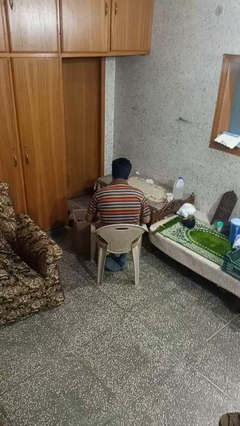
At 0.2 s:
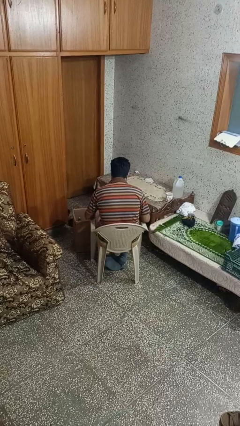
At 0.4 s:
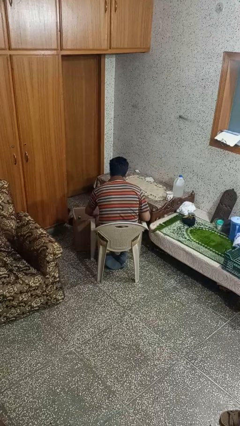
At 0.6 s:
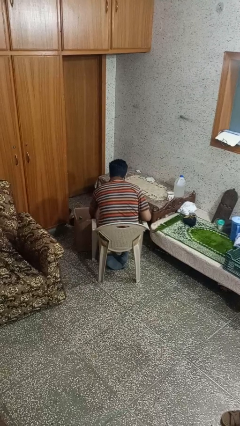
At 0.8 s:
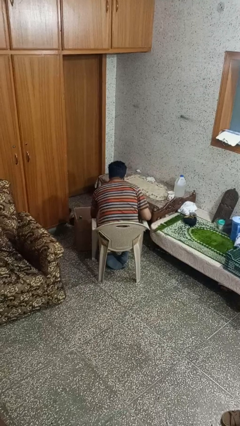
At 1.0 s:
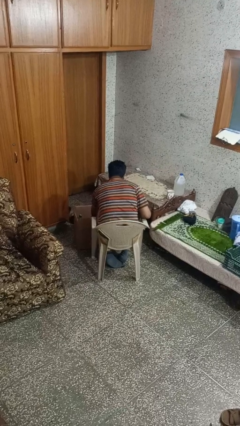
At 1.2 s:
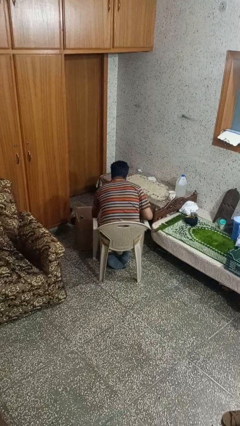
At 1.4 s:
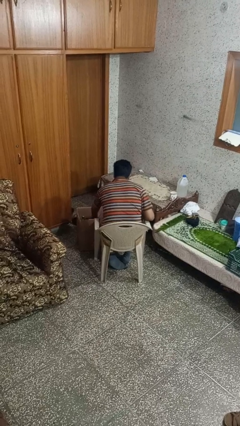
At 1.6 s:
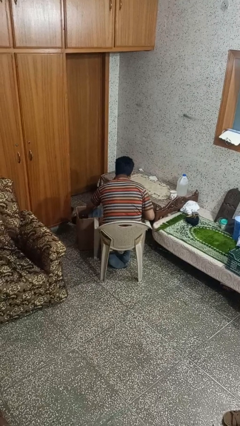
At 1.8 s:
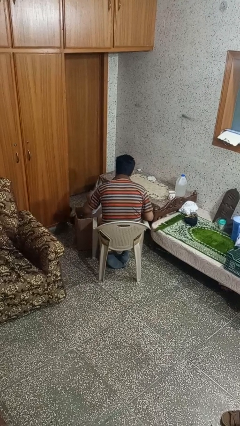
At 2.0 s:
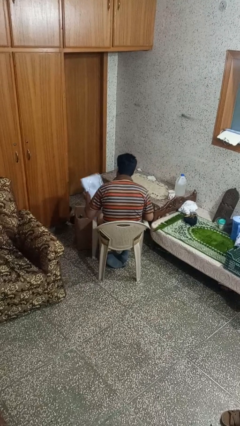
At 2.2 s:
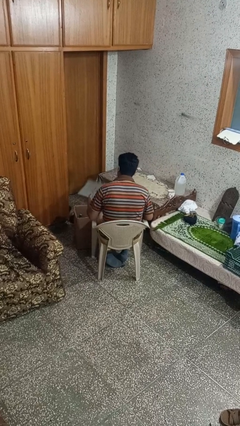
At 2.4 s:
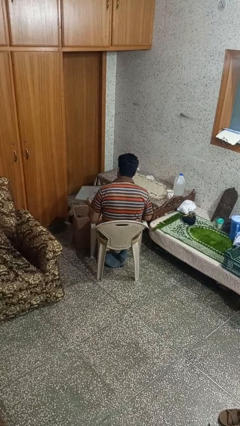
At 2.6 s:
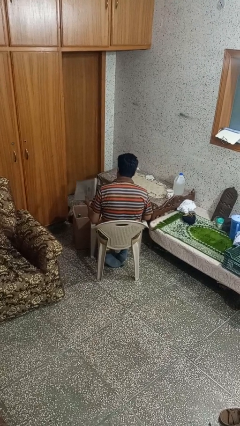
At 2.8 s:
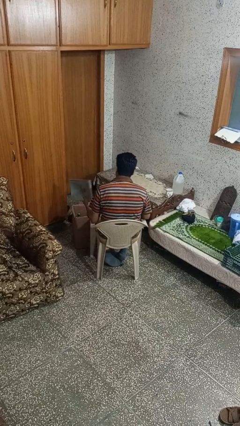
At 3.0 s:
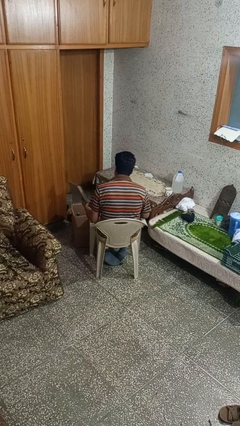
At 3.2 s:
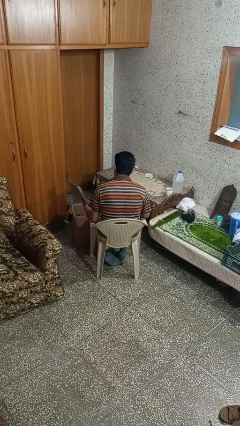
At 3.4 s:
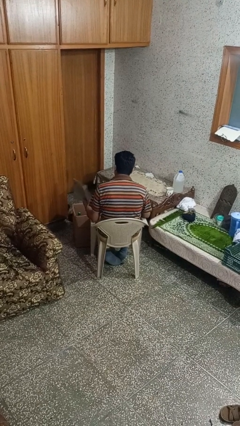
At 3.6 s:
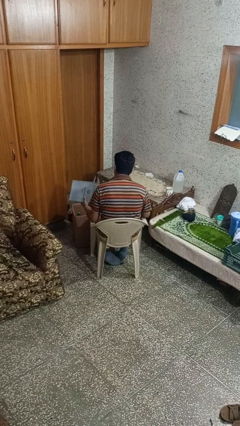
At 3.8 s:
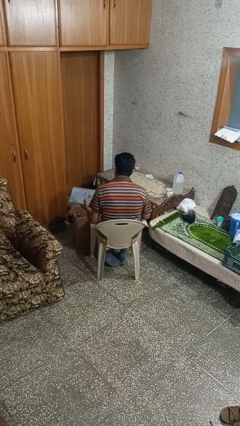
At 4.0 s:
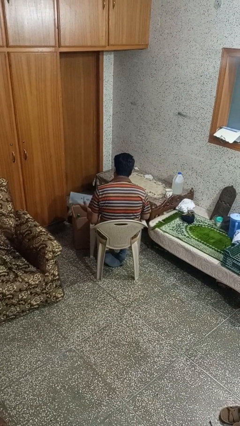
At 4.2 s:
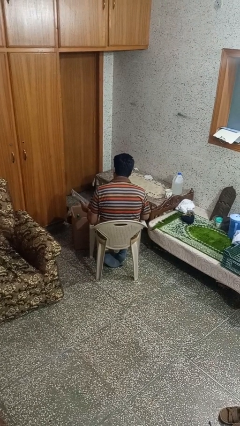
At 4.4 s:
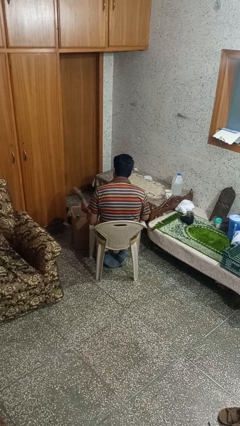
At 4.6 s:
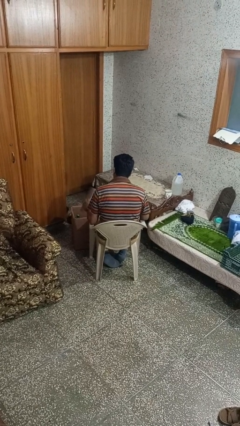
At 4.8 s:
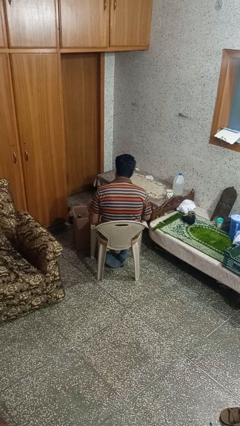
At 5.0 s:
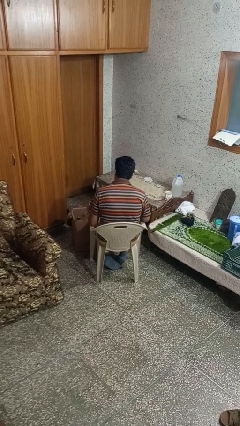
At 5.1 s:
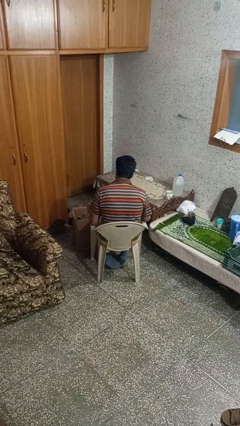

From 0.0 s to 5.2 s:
person takes object from box

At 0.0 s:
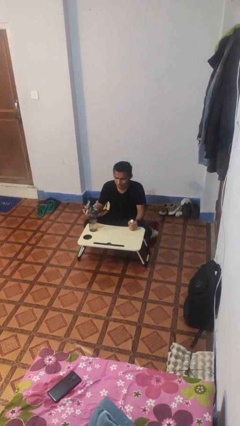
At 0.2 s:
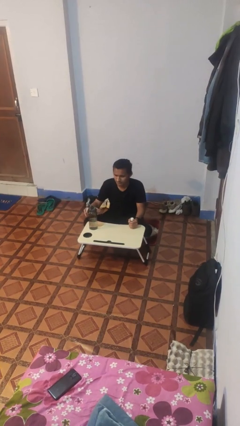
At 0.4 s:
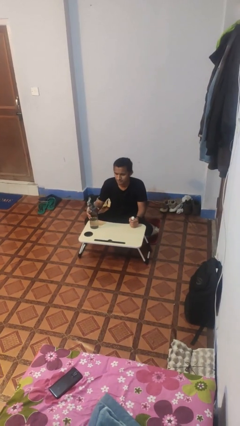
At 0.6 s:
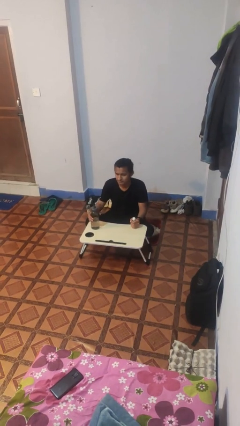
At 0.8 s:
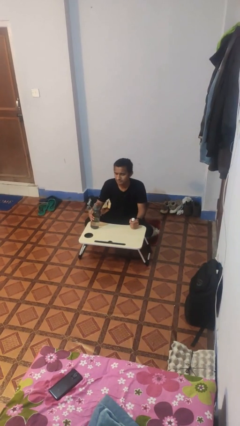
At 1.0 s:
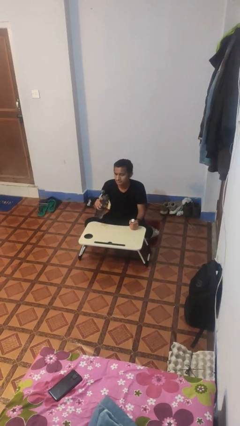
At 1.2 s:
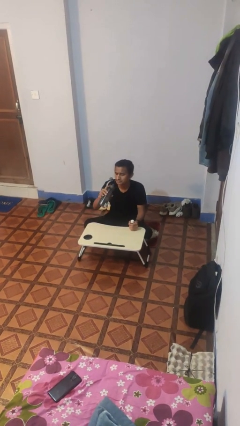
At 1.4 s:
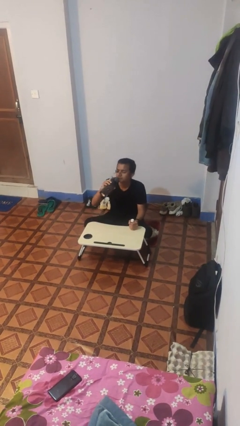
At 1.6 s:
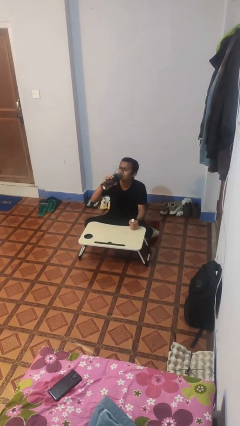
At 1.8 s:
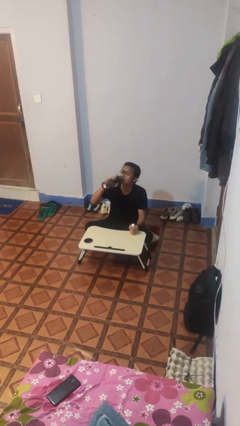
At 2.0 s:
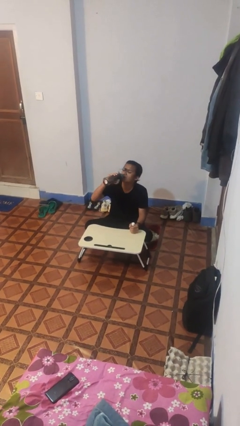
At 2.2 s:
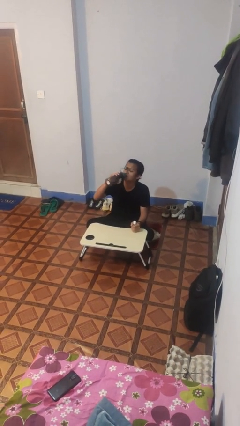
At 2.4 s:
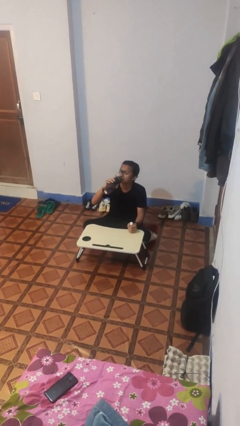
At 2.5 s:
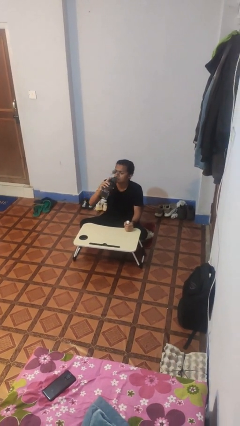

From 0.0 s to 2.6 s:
person drinks from cup

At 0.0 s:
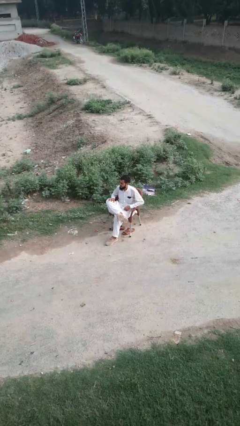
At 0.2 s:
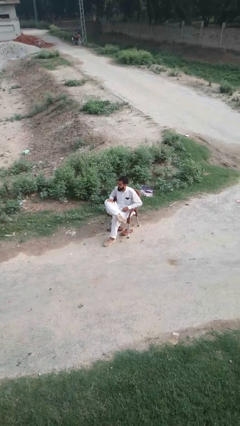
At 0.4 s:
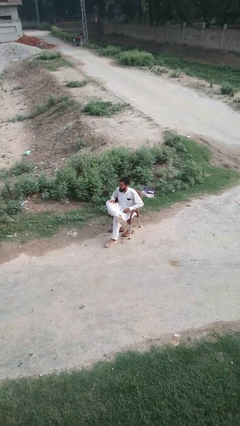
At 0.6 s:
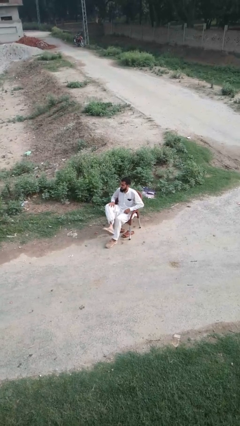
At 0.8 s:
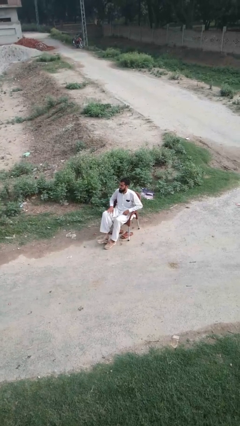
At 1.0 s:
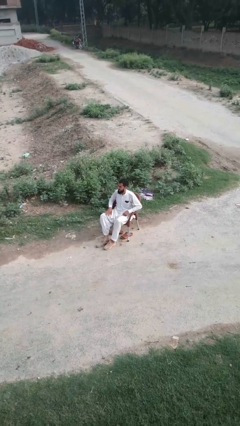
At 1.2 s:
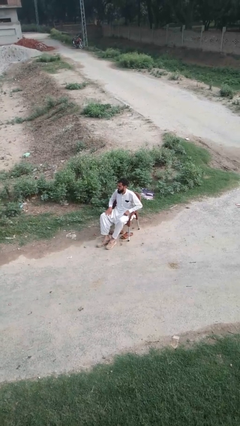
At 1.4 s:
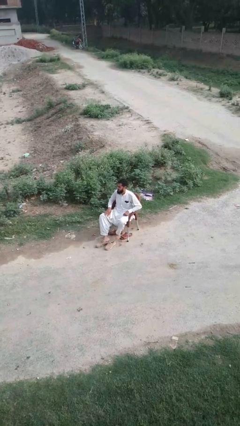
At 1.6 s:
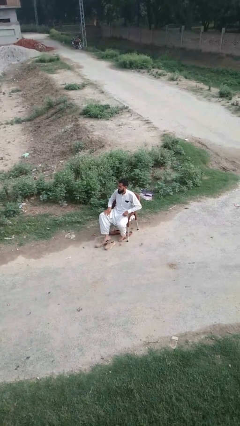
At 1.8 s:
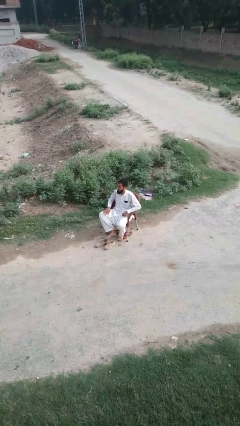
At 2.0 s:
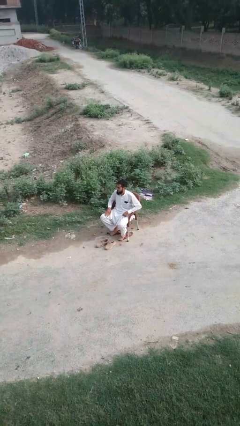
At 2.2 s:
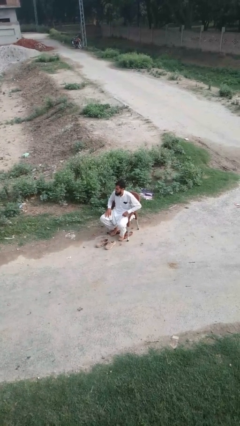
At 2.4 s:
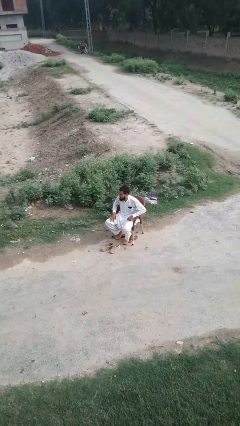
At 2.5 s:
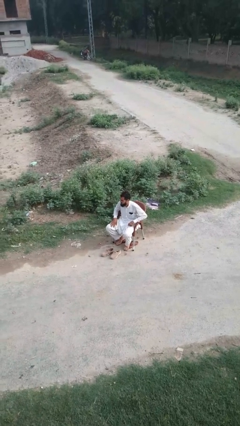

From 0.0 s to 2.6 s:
person takes off shoes

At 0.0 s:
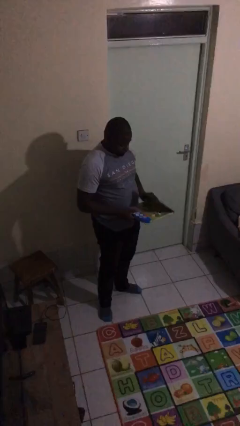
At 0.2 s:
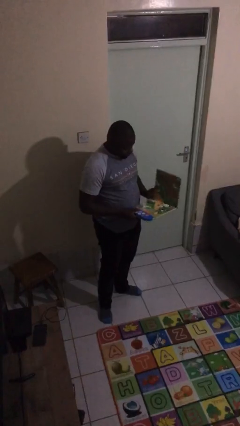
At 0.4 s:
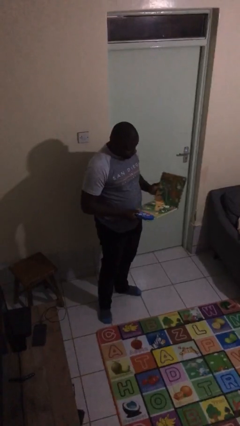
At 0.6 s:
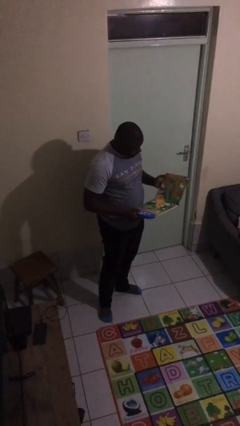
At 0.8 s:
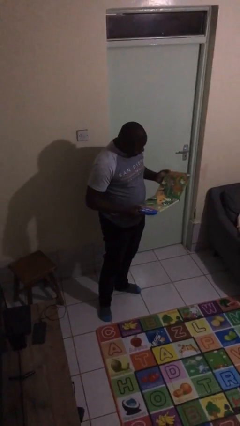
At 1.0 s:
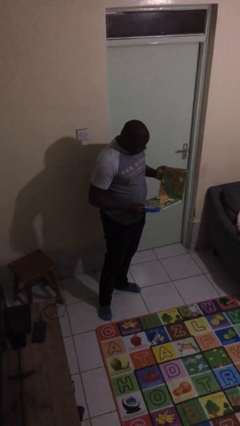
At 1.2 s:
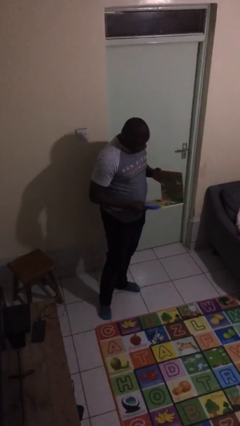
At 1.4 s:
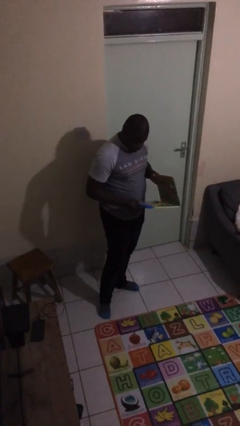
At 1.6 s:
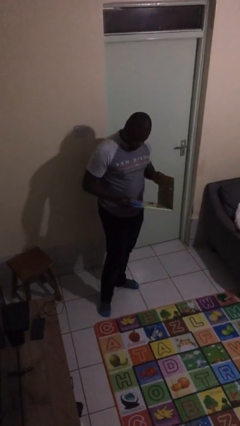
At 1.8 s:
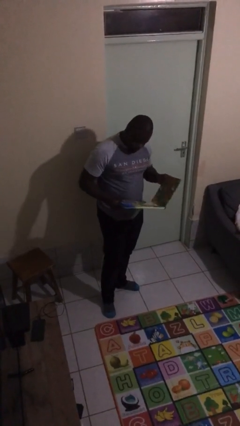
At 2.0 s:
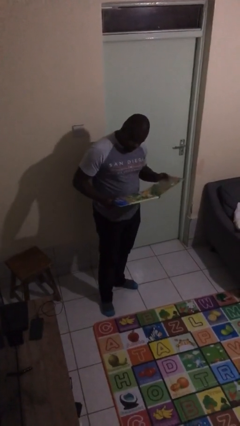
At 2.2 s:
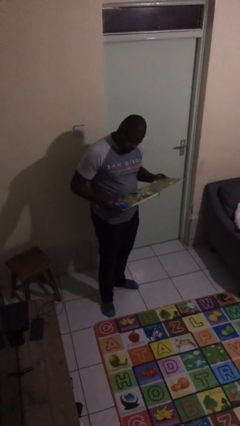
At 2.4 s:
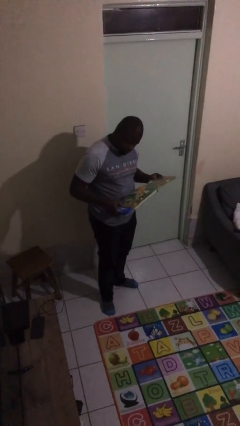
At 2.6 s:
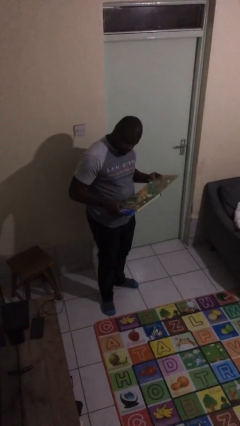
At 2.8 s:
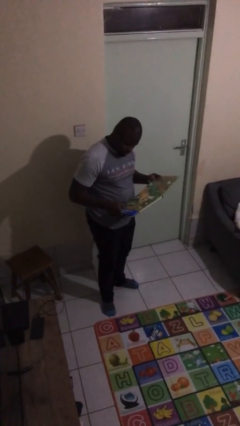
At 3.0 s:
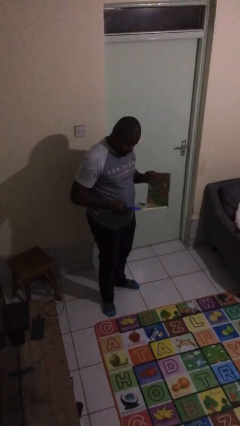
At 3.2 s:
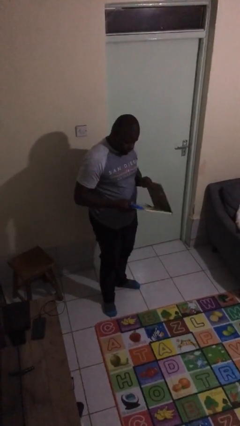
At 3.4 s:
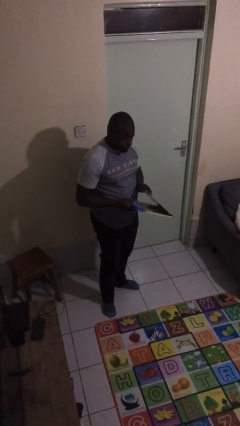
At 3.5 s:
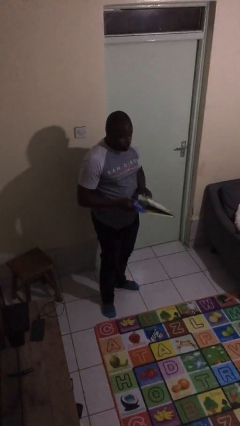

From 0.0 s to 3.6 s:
person reads book

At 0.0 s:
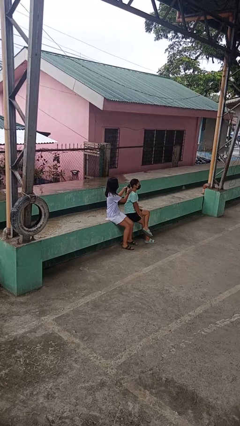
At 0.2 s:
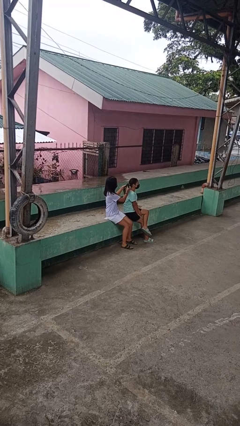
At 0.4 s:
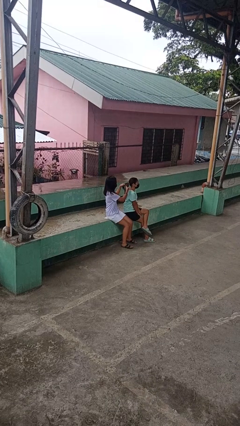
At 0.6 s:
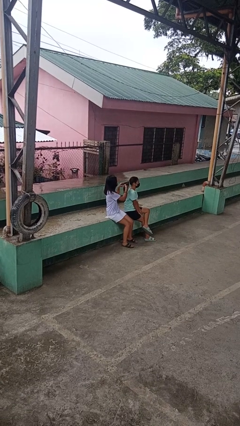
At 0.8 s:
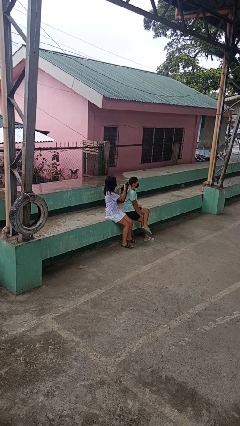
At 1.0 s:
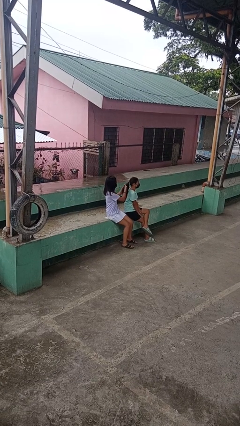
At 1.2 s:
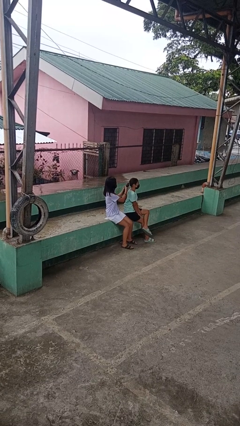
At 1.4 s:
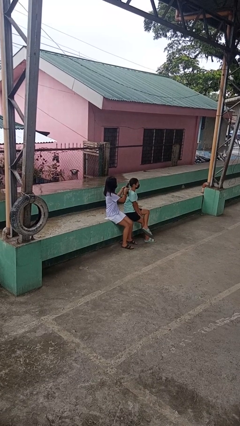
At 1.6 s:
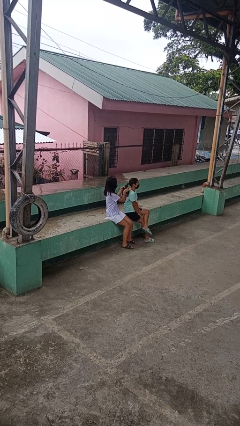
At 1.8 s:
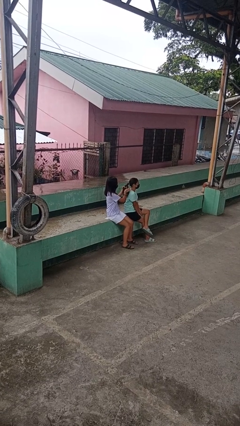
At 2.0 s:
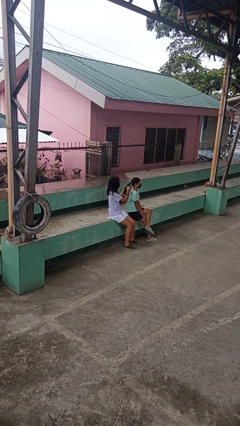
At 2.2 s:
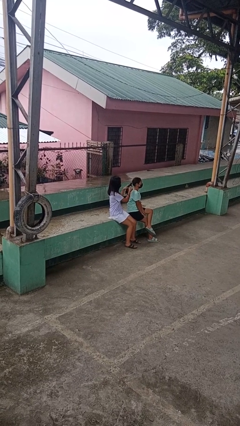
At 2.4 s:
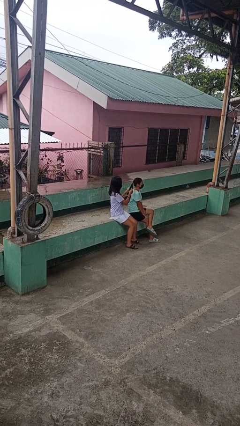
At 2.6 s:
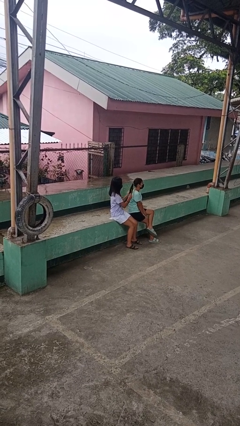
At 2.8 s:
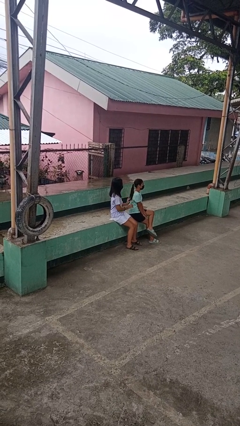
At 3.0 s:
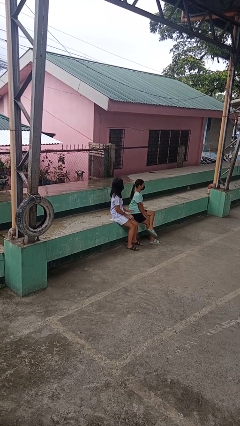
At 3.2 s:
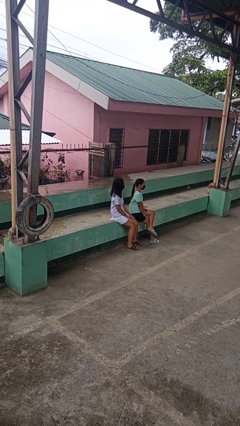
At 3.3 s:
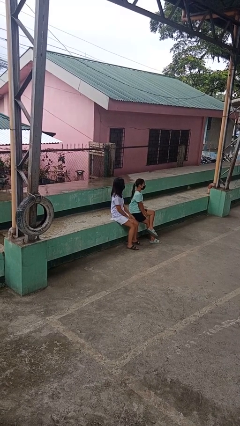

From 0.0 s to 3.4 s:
person braids hair of person
